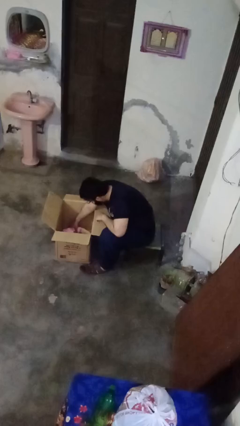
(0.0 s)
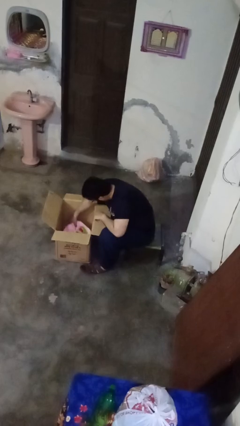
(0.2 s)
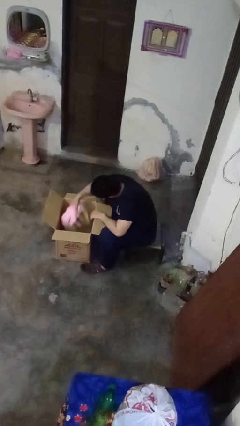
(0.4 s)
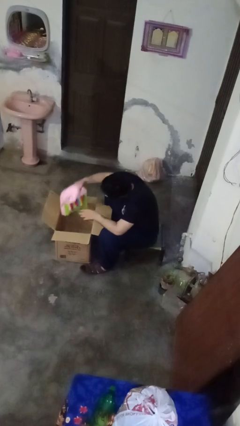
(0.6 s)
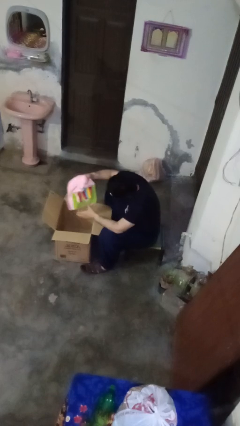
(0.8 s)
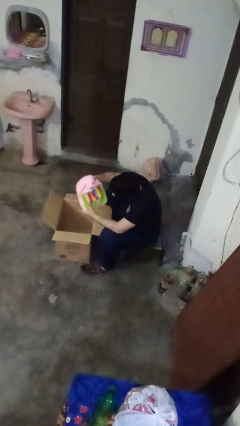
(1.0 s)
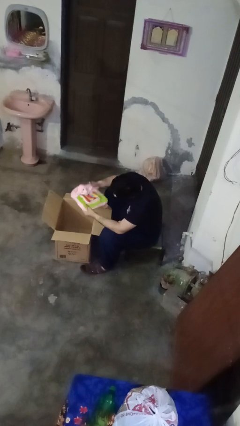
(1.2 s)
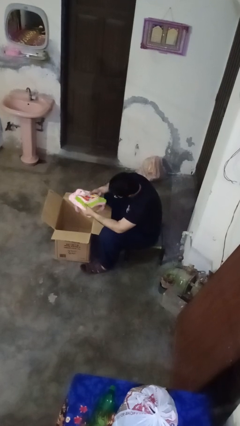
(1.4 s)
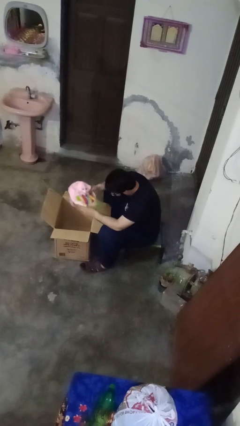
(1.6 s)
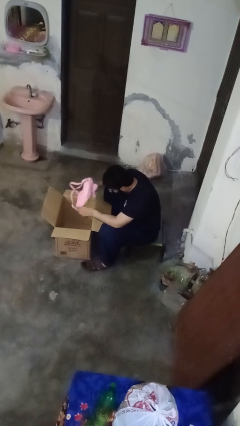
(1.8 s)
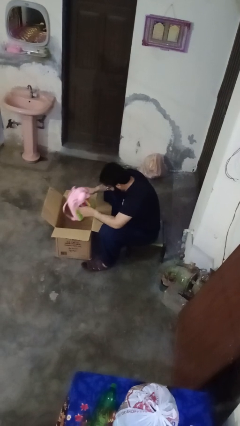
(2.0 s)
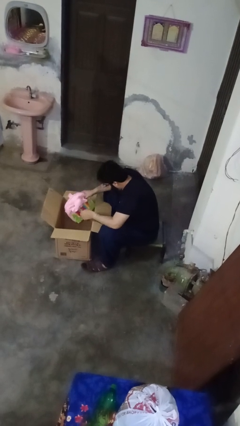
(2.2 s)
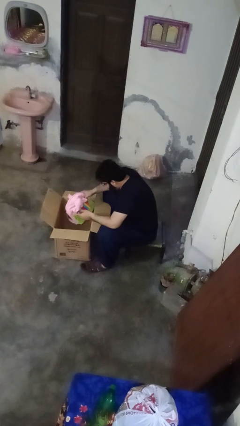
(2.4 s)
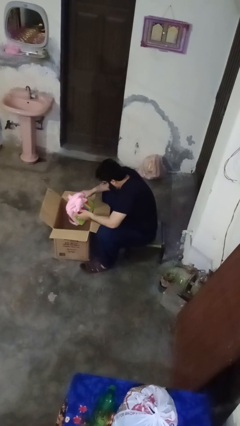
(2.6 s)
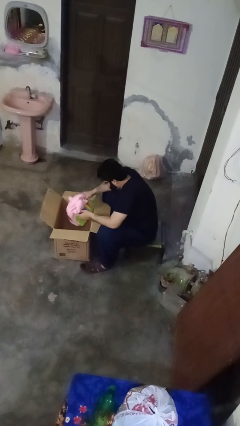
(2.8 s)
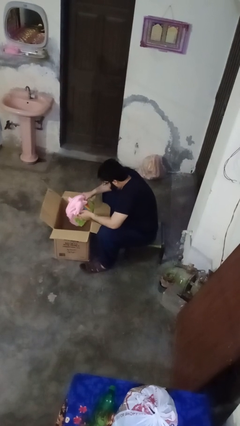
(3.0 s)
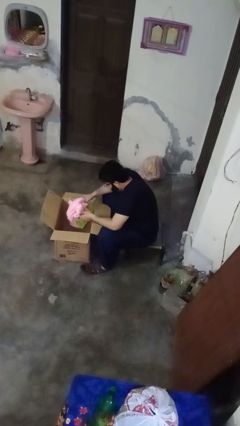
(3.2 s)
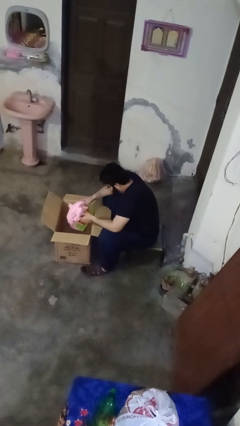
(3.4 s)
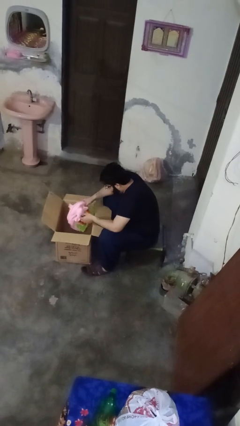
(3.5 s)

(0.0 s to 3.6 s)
person searches in box

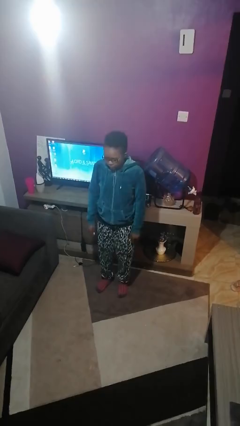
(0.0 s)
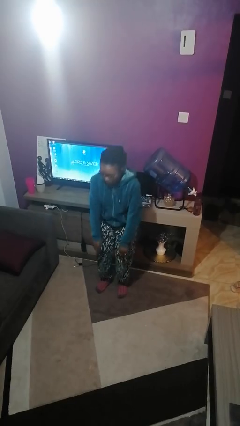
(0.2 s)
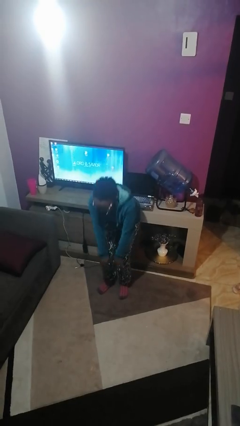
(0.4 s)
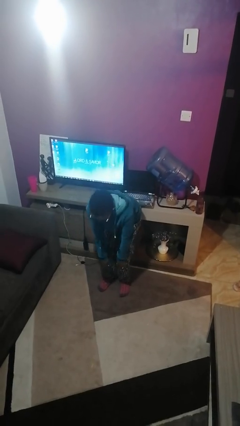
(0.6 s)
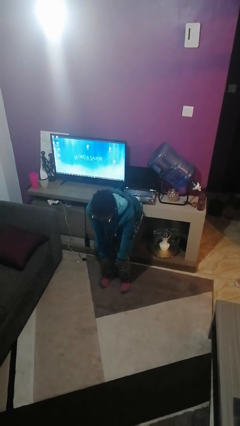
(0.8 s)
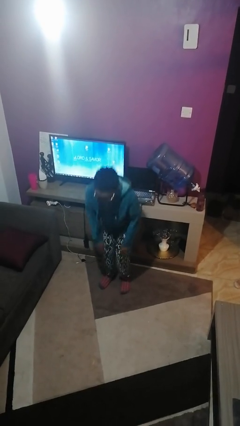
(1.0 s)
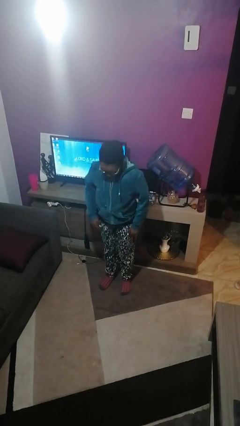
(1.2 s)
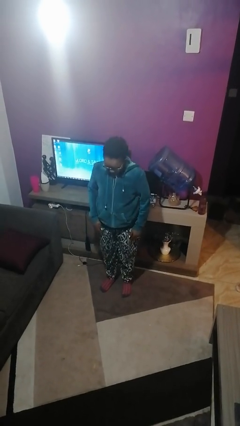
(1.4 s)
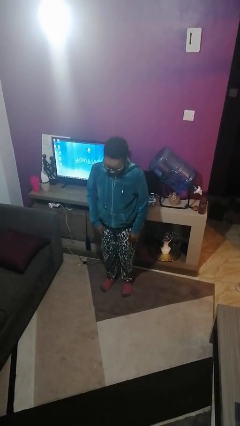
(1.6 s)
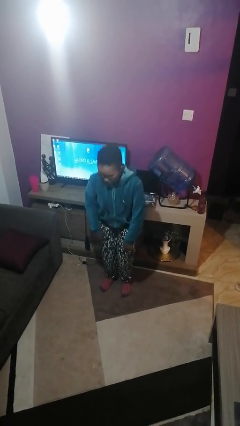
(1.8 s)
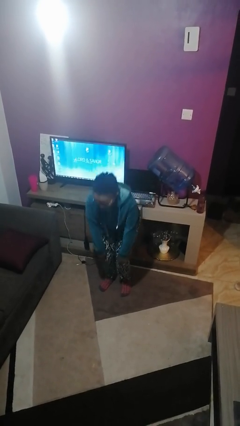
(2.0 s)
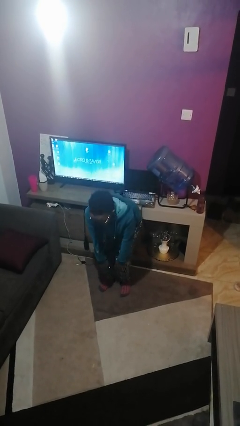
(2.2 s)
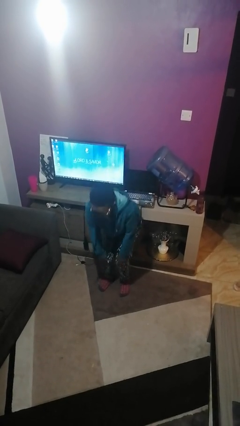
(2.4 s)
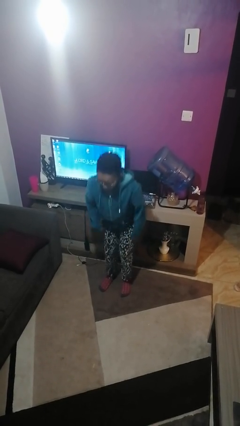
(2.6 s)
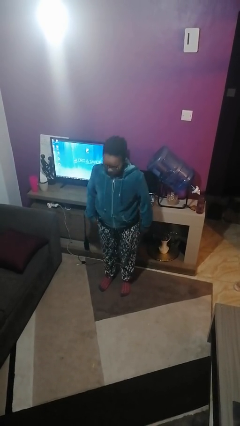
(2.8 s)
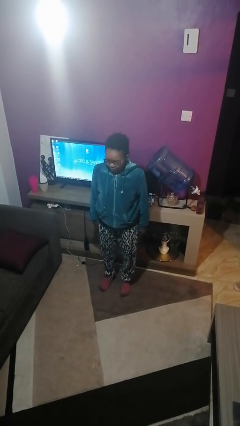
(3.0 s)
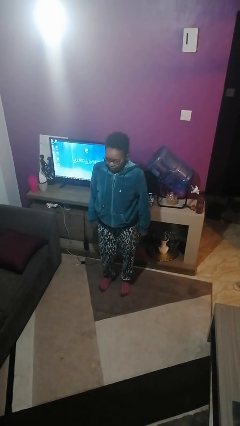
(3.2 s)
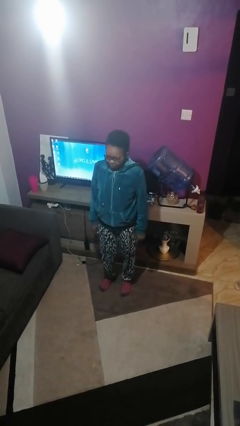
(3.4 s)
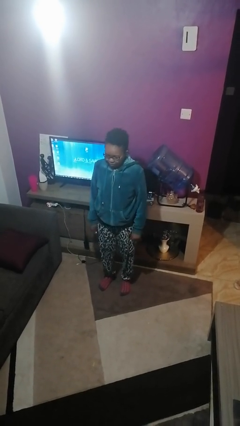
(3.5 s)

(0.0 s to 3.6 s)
person dances in place

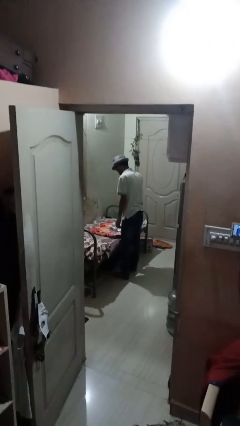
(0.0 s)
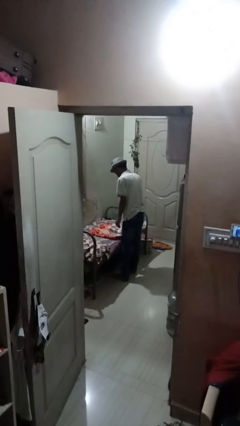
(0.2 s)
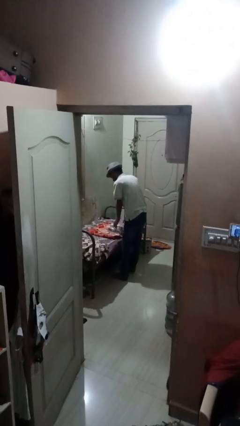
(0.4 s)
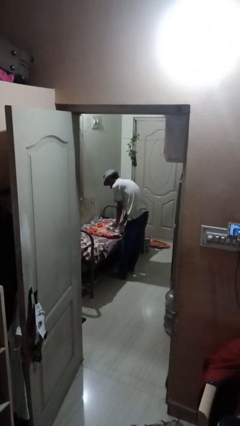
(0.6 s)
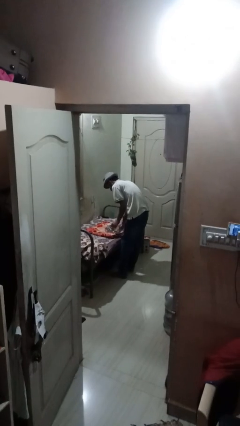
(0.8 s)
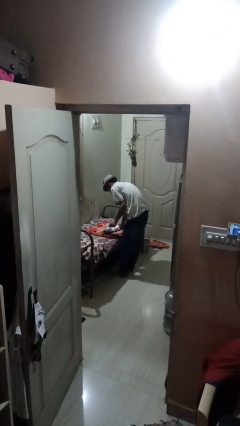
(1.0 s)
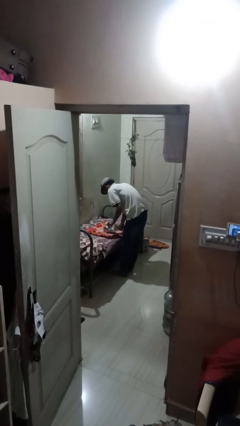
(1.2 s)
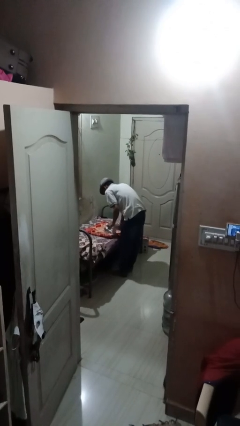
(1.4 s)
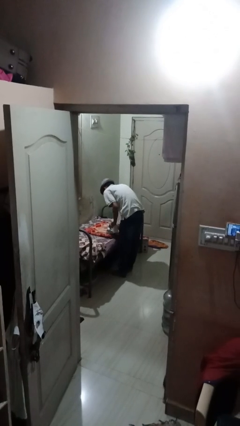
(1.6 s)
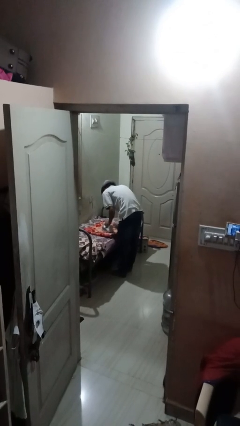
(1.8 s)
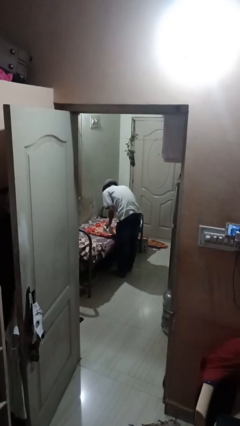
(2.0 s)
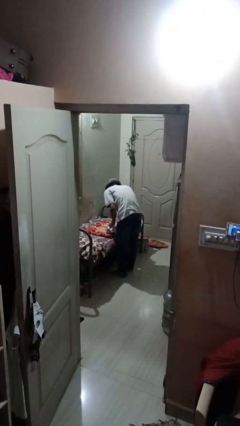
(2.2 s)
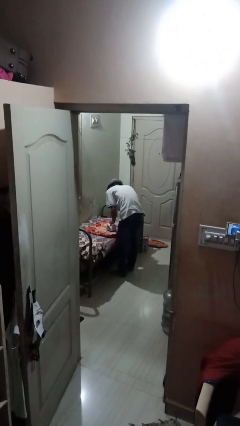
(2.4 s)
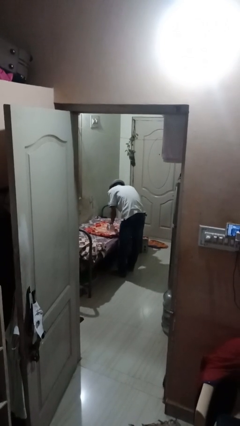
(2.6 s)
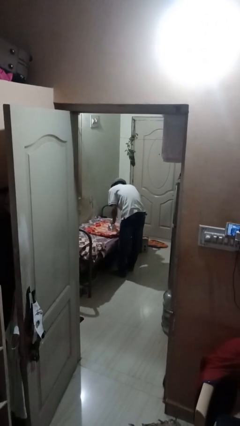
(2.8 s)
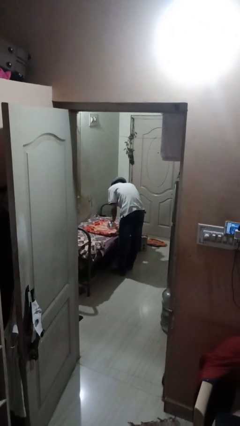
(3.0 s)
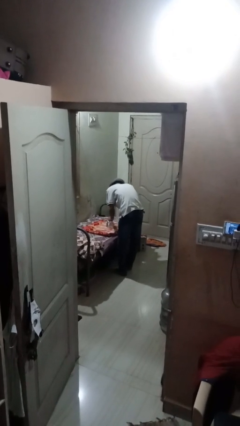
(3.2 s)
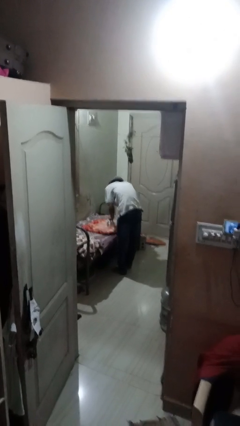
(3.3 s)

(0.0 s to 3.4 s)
person irons clothes

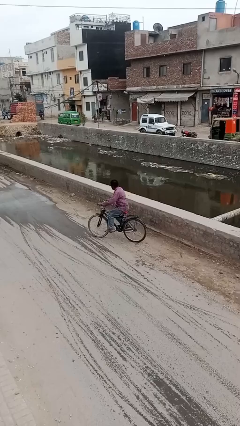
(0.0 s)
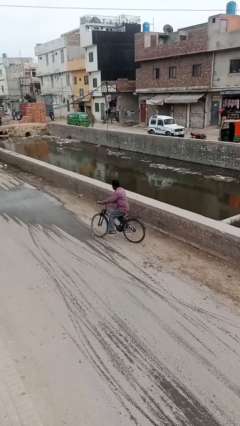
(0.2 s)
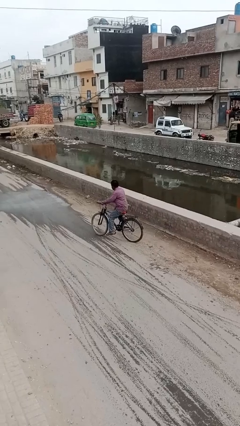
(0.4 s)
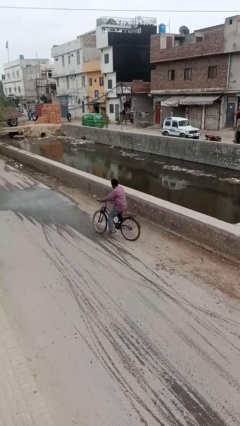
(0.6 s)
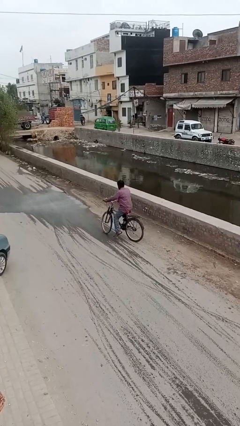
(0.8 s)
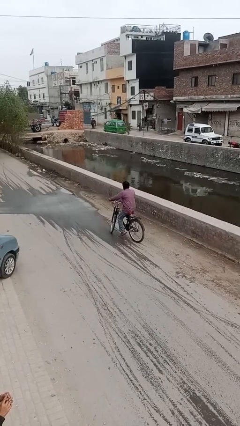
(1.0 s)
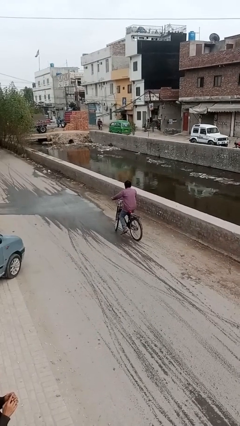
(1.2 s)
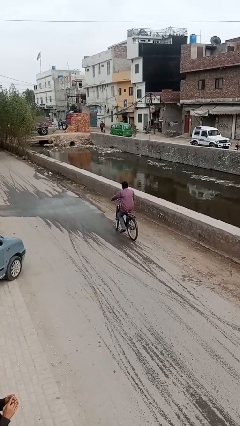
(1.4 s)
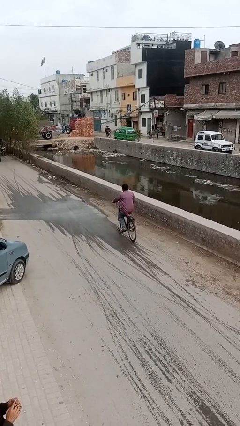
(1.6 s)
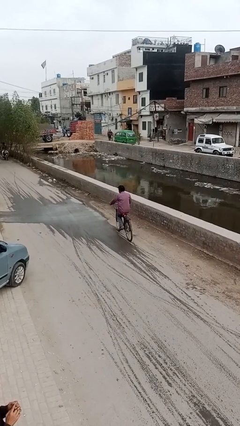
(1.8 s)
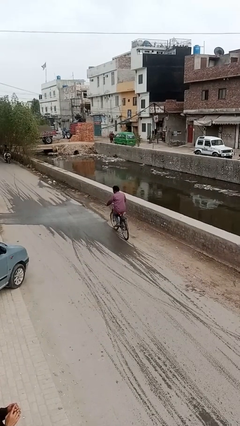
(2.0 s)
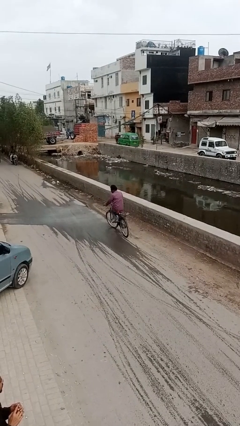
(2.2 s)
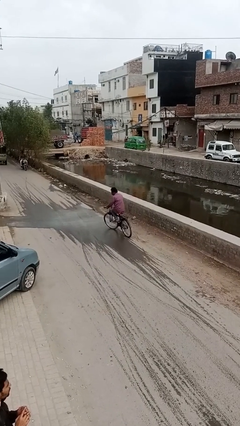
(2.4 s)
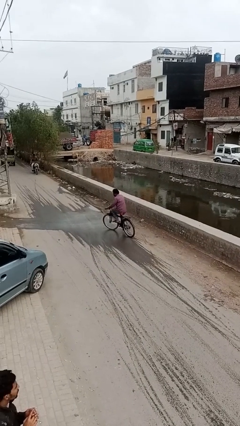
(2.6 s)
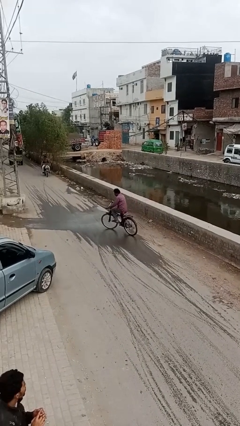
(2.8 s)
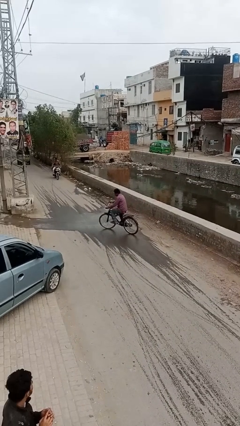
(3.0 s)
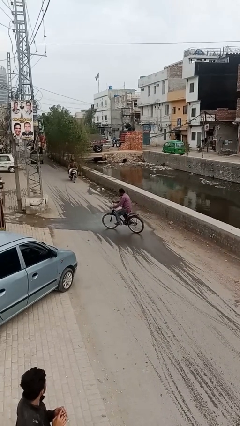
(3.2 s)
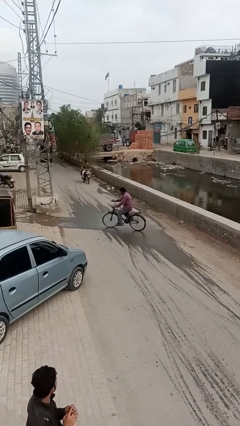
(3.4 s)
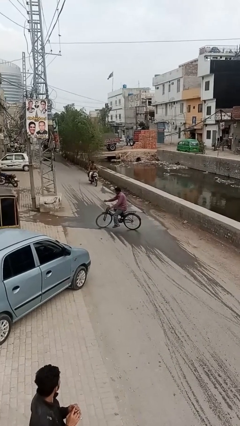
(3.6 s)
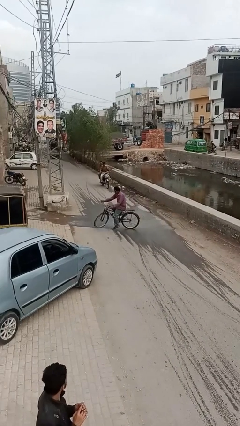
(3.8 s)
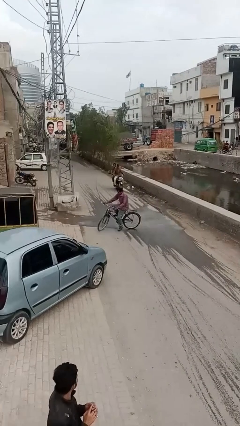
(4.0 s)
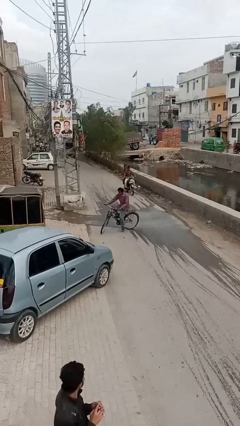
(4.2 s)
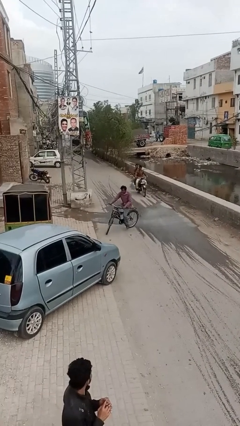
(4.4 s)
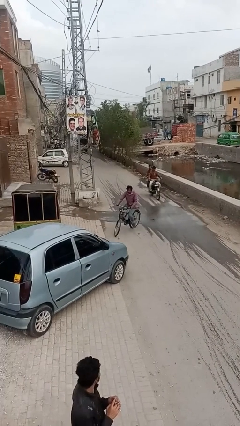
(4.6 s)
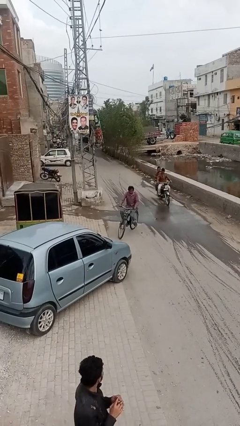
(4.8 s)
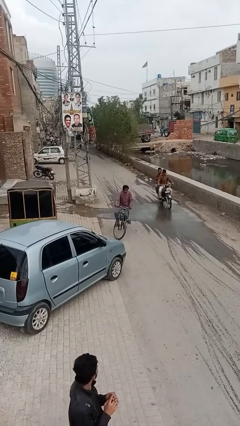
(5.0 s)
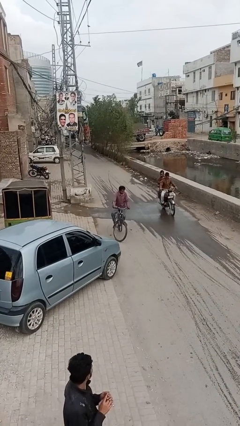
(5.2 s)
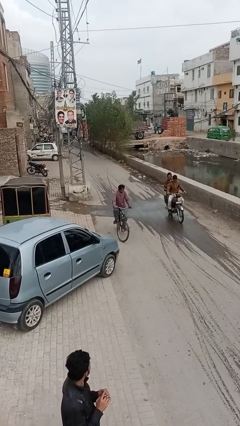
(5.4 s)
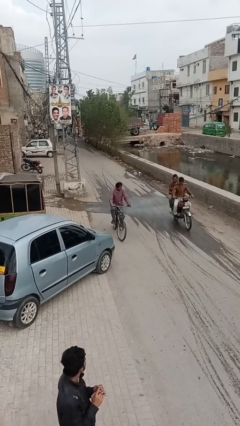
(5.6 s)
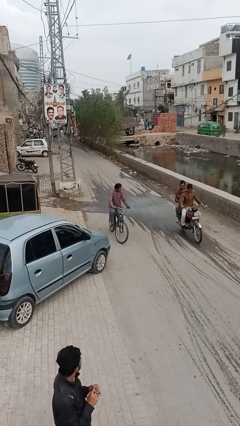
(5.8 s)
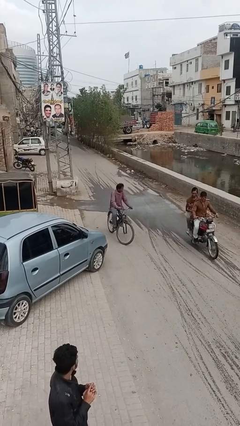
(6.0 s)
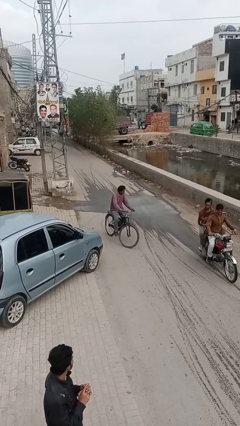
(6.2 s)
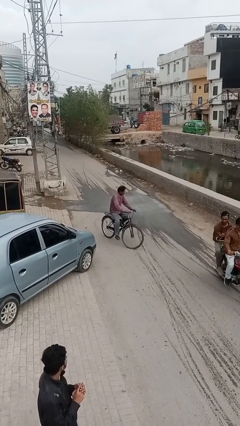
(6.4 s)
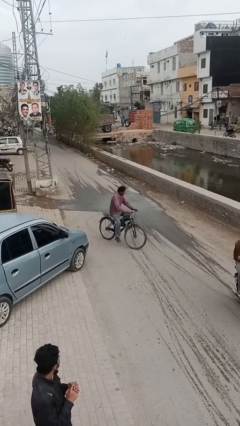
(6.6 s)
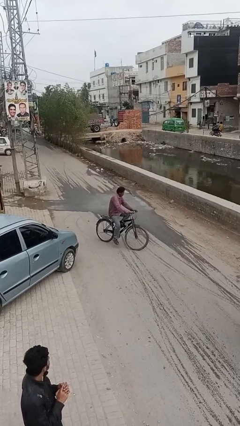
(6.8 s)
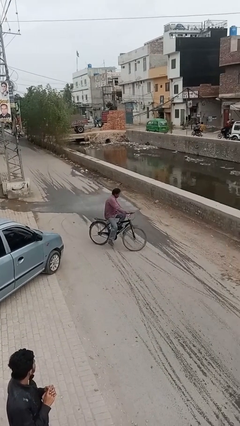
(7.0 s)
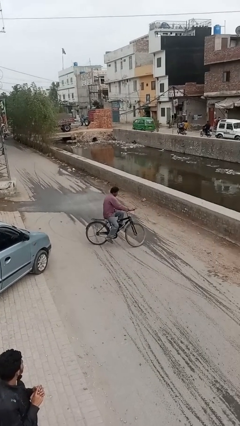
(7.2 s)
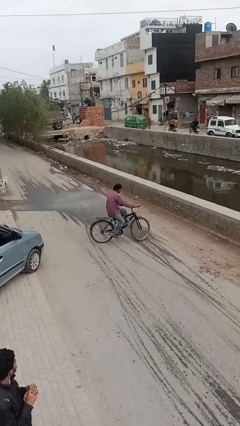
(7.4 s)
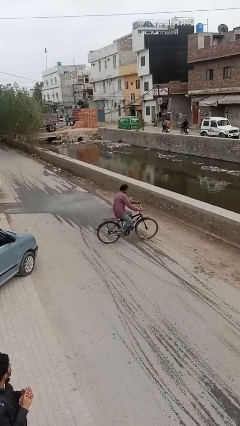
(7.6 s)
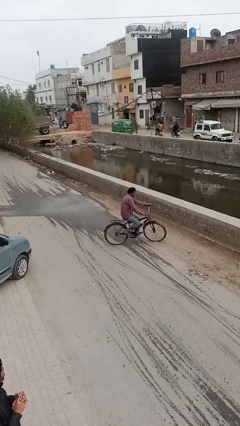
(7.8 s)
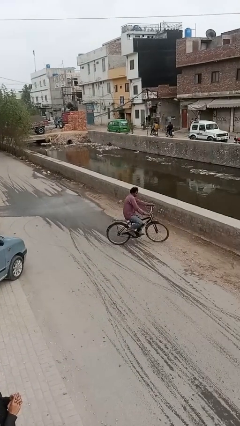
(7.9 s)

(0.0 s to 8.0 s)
person rides bicycle
